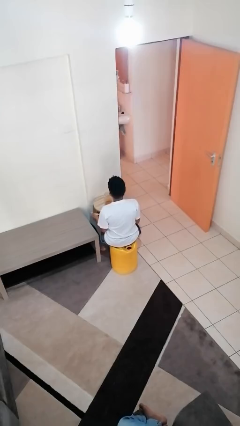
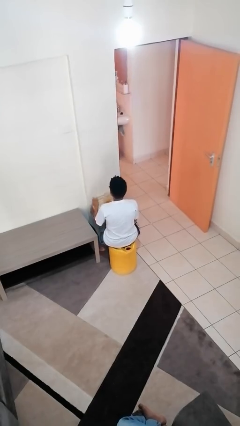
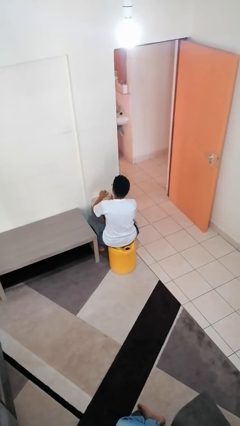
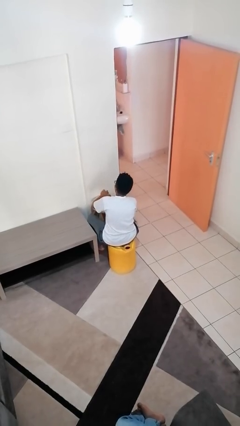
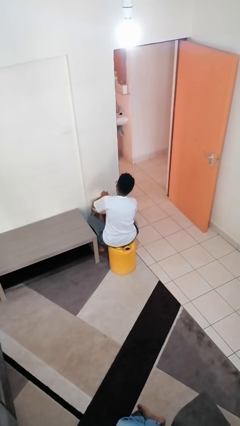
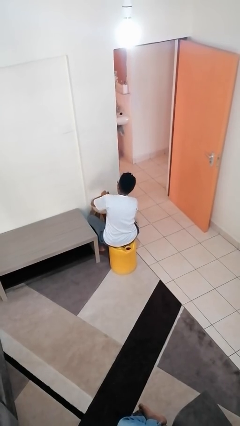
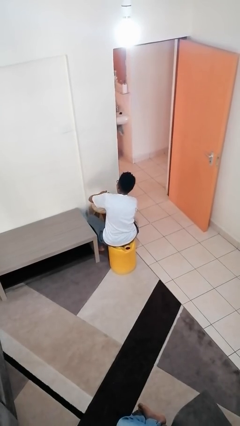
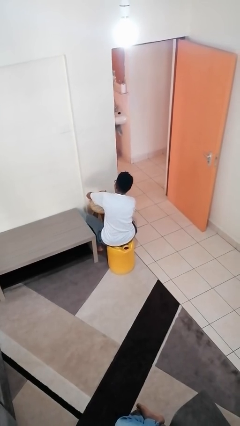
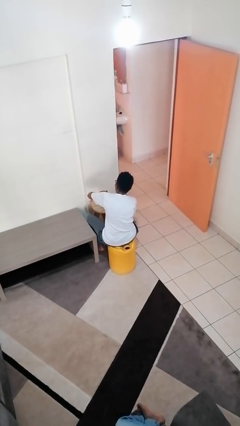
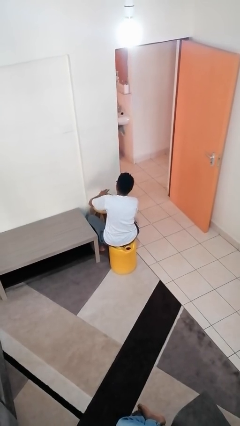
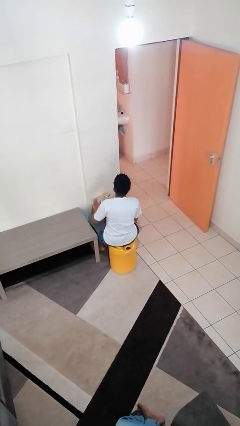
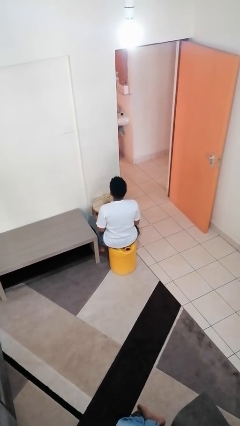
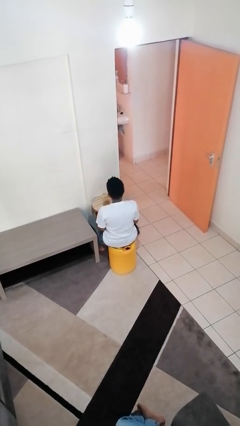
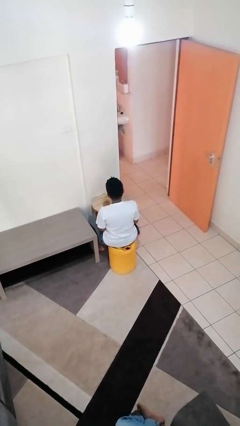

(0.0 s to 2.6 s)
person closes jar

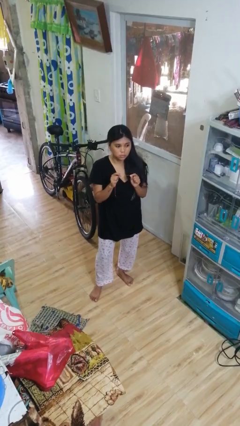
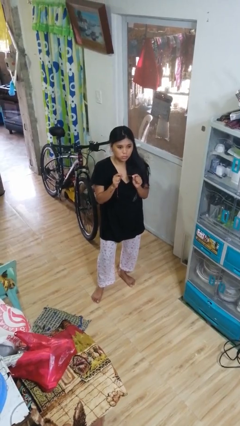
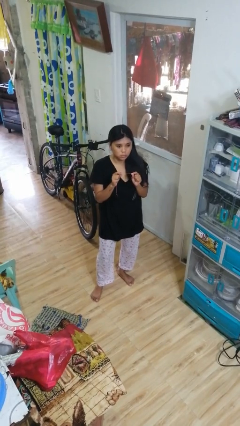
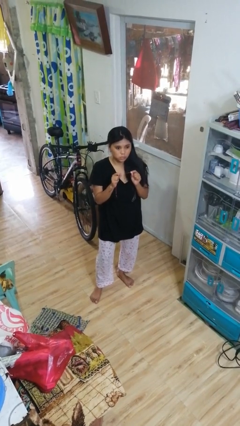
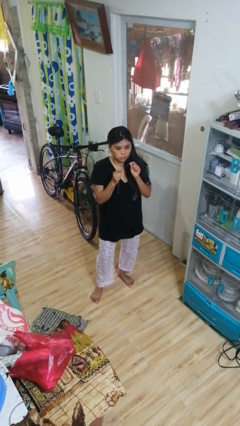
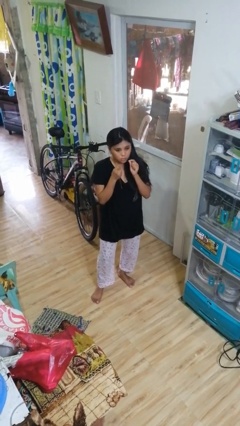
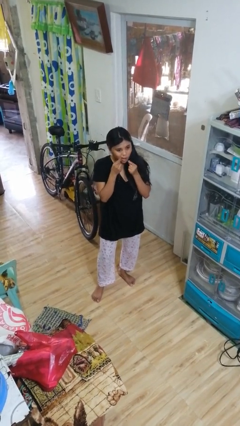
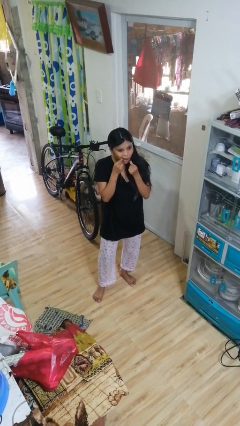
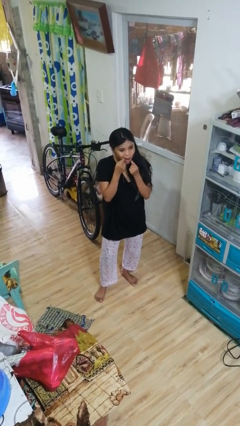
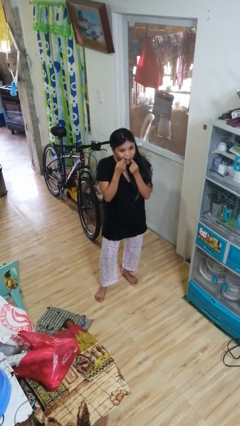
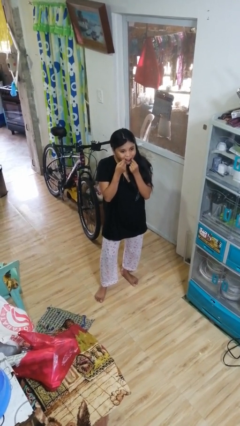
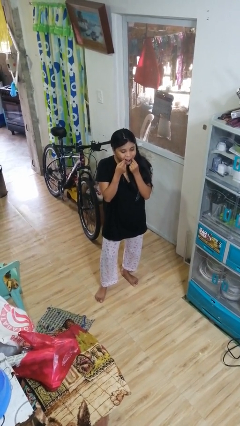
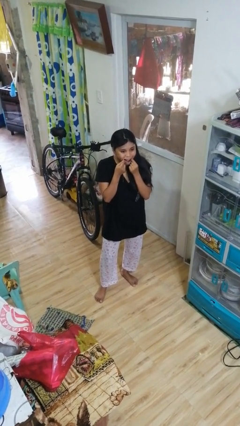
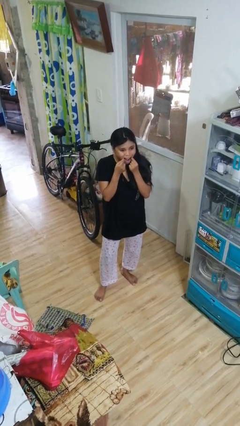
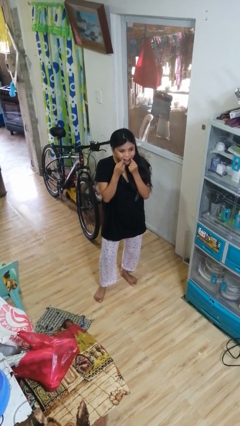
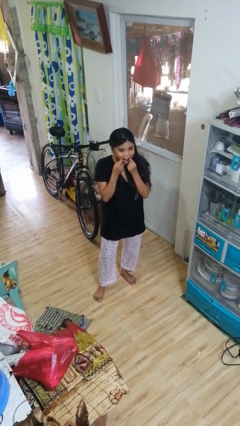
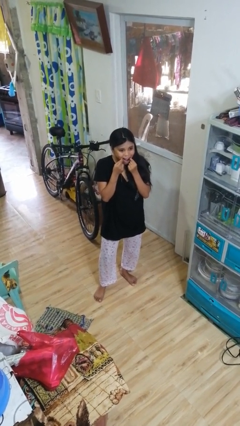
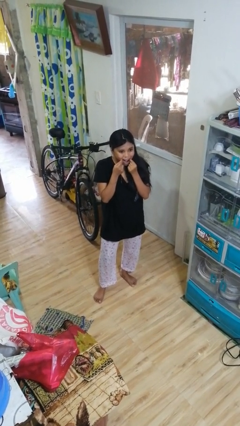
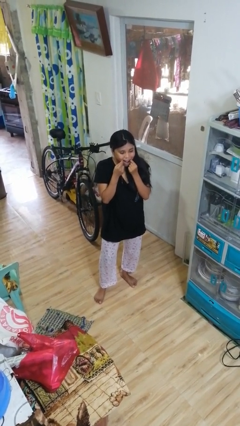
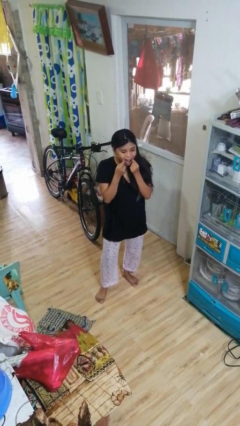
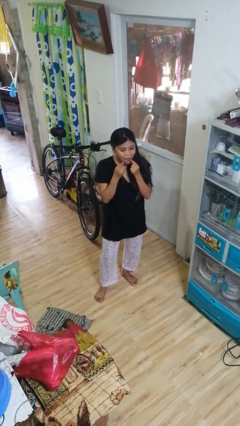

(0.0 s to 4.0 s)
person flosses

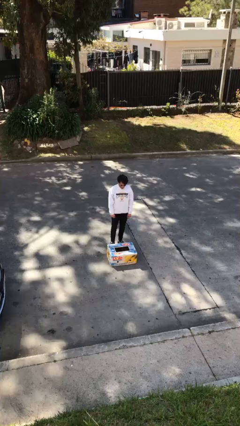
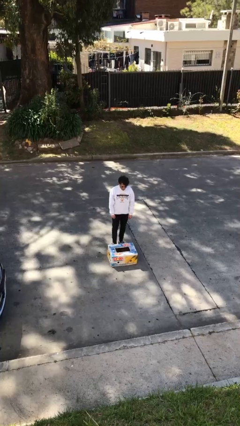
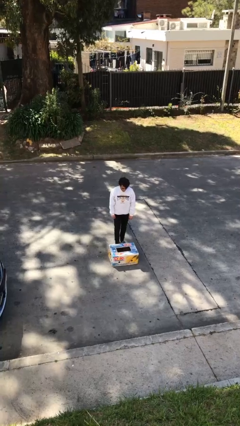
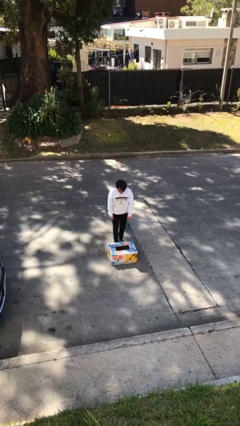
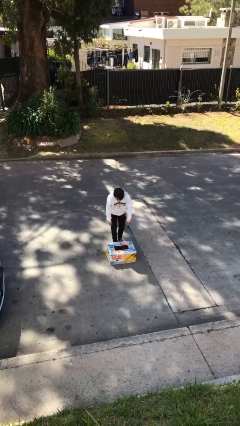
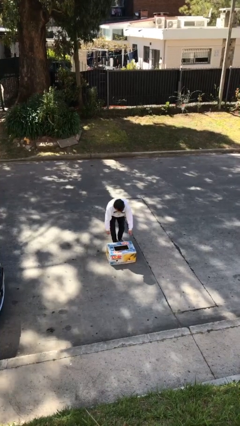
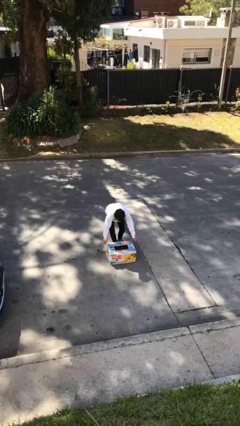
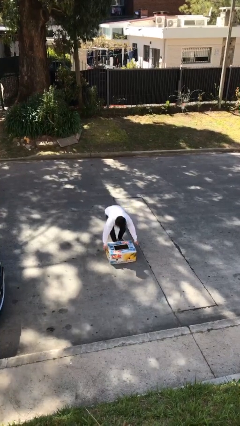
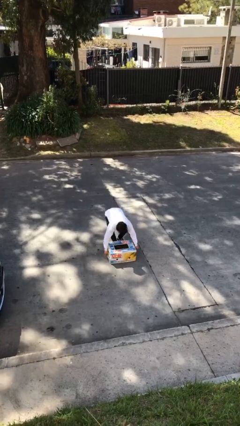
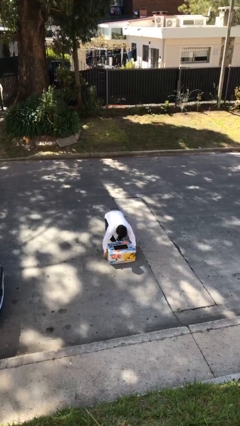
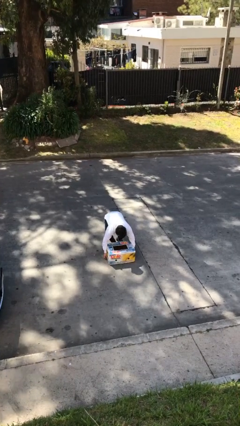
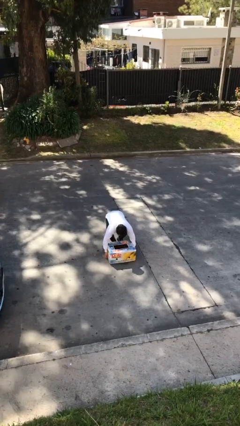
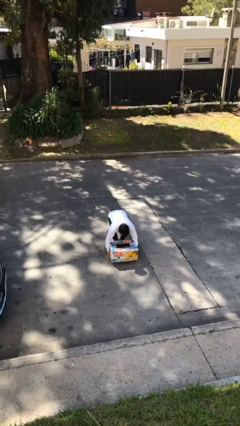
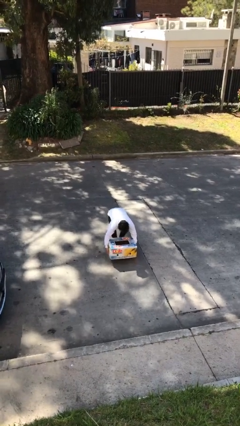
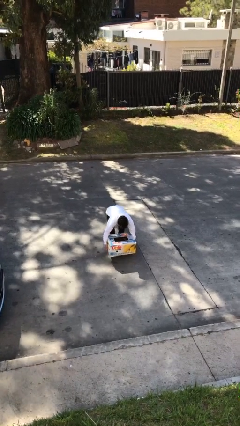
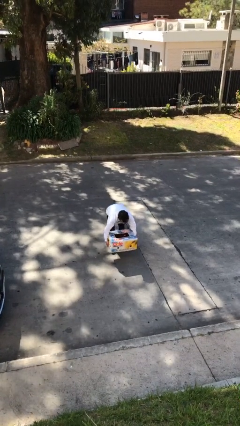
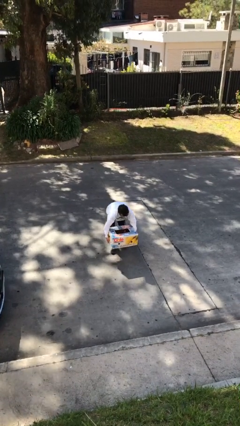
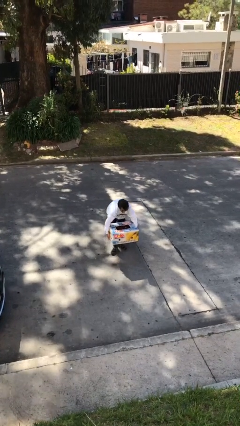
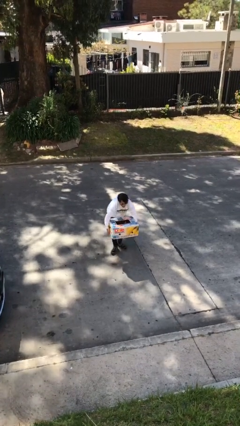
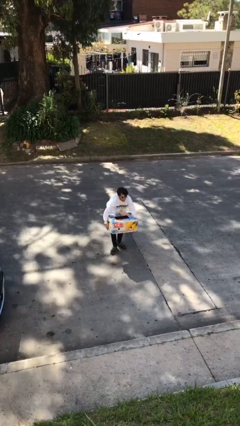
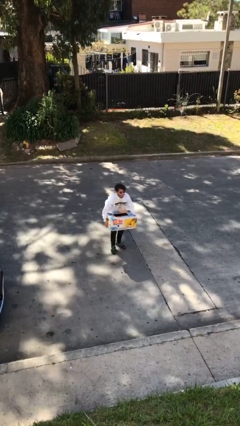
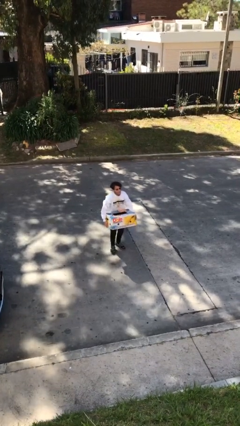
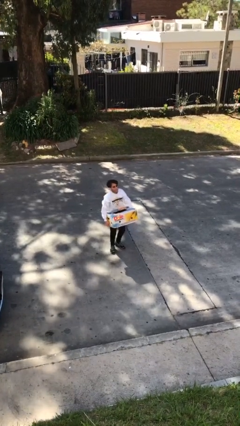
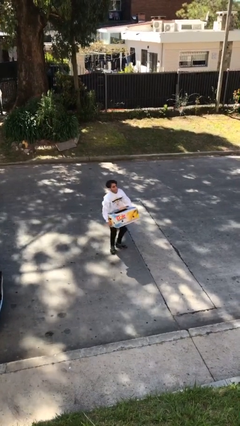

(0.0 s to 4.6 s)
person picks up object from floor

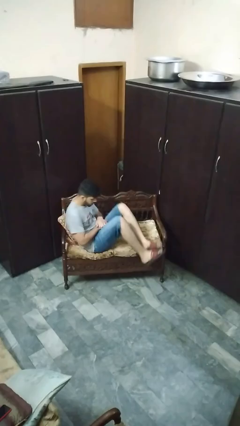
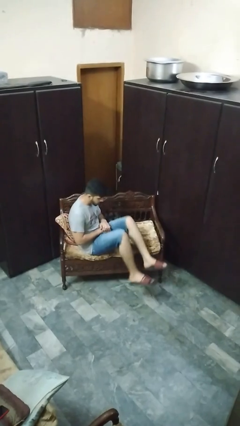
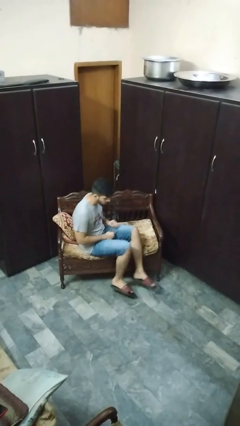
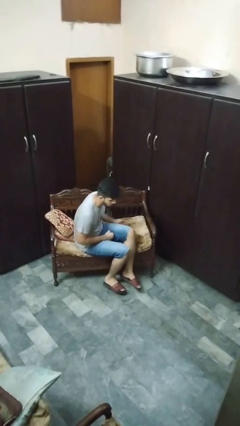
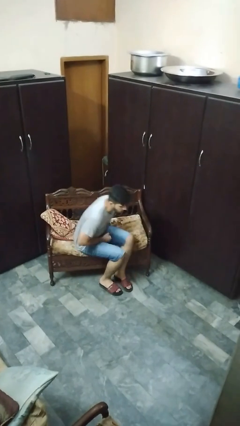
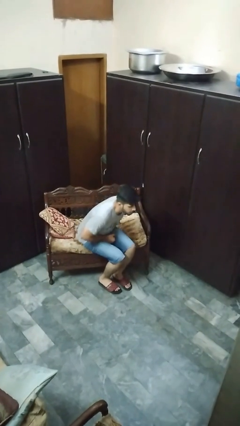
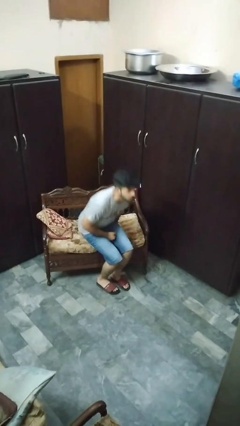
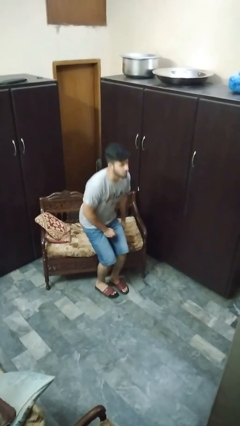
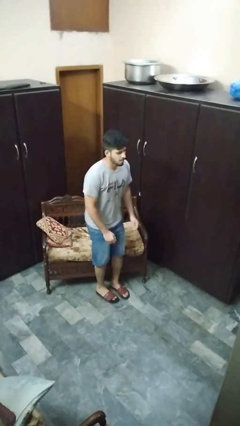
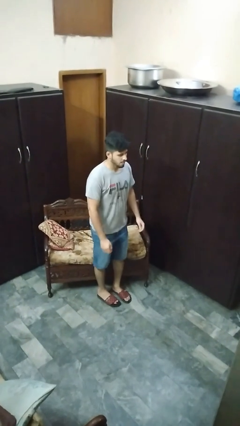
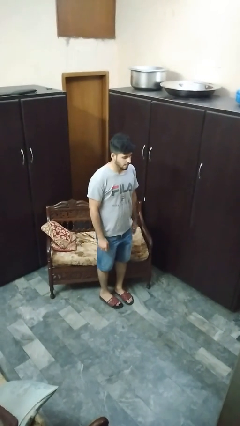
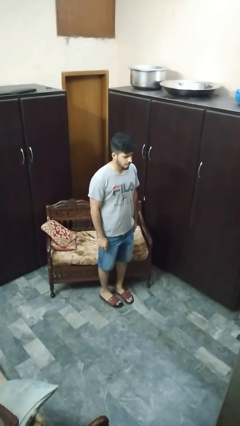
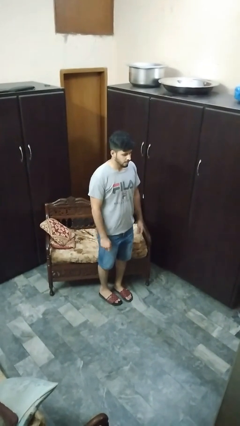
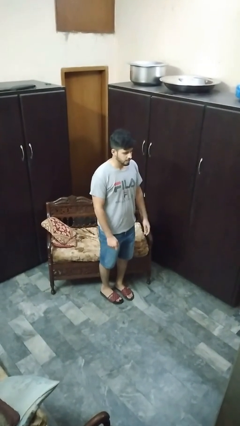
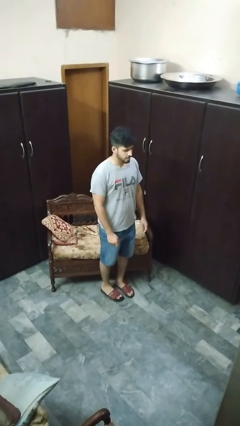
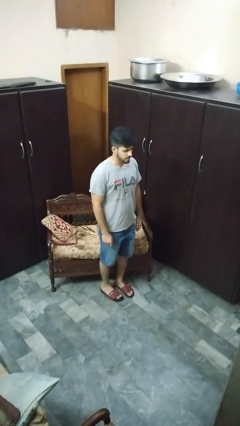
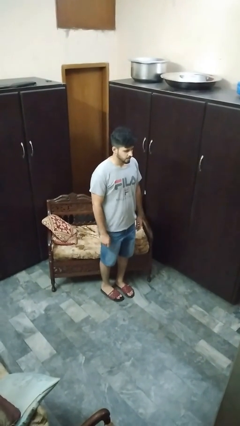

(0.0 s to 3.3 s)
person stands up

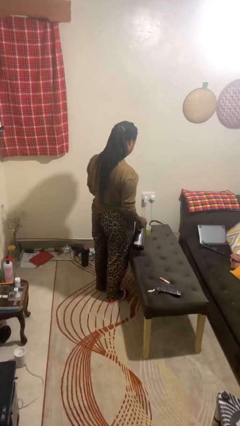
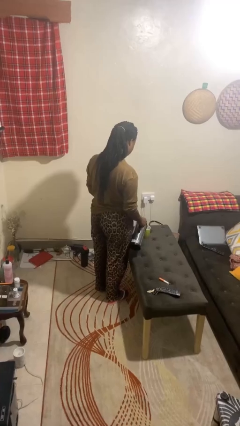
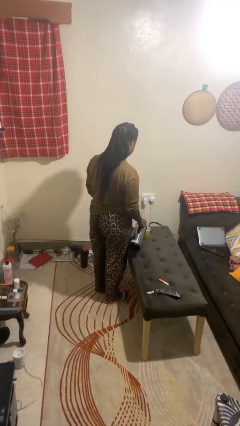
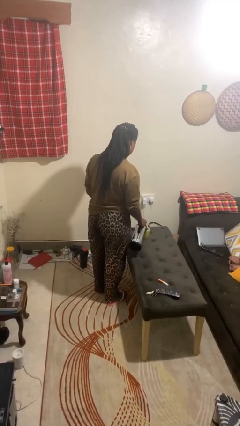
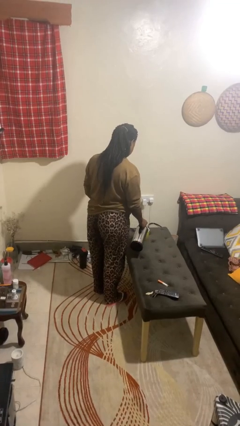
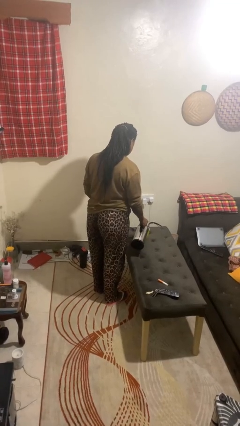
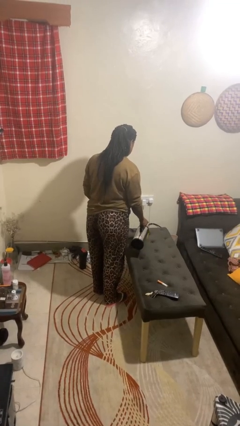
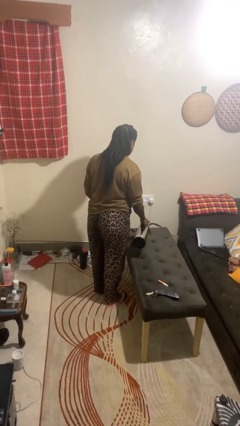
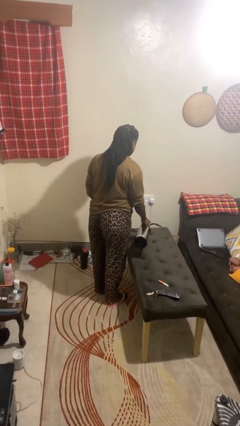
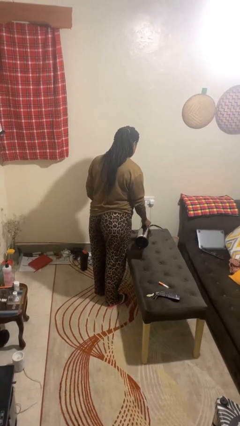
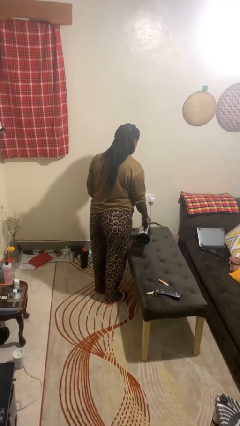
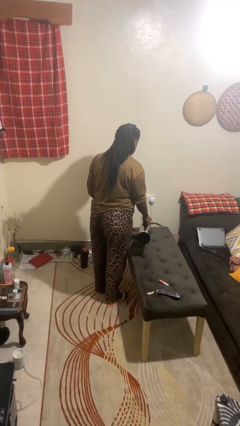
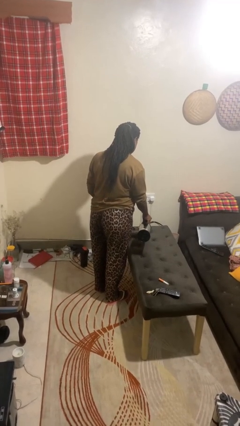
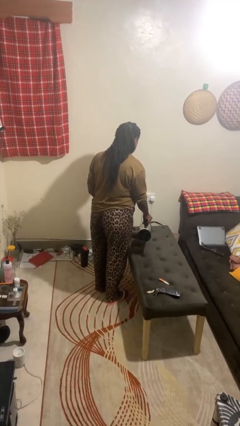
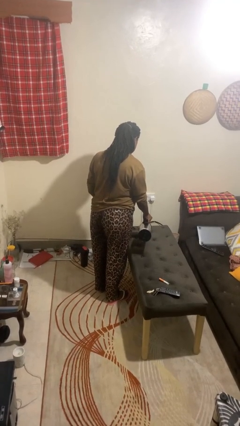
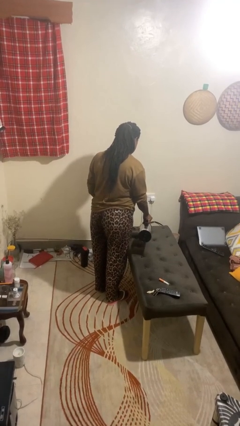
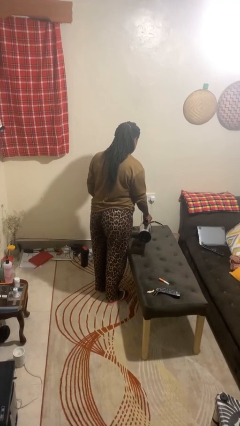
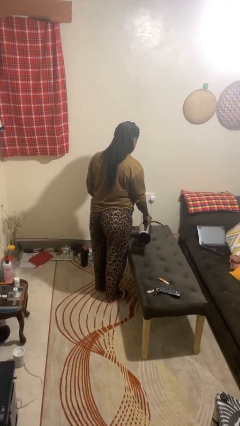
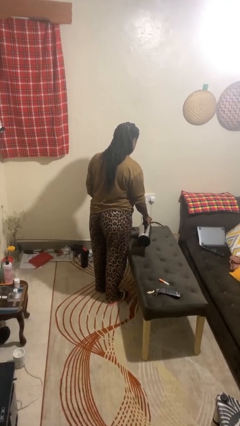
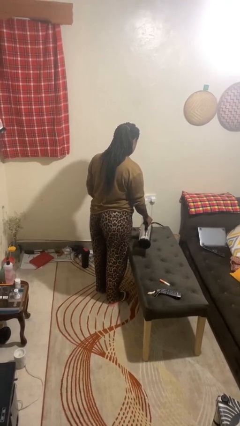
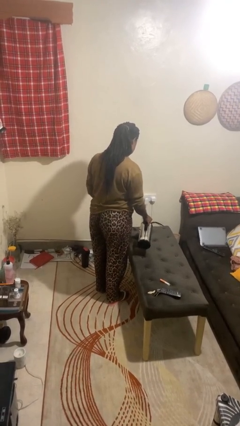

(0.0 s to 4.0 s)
person pours coffee into mug
